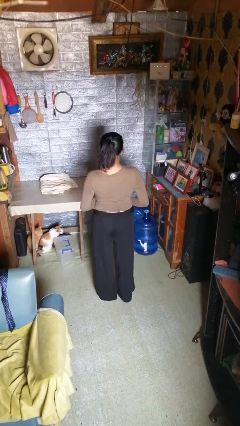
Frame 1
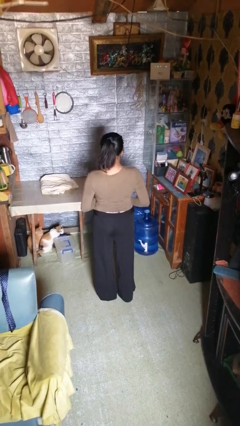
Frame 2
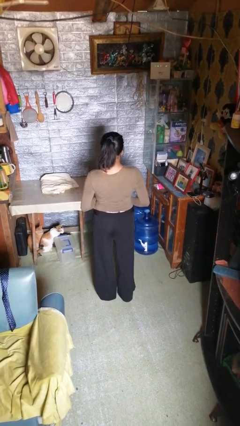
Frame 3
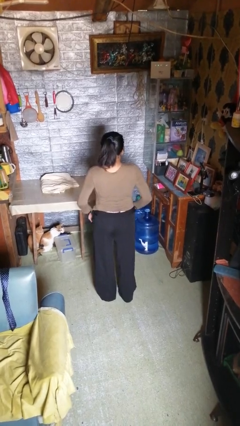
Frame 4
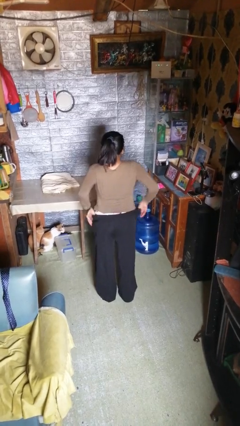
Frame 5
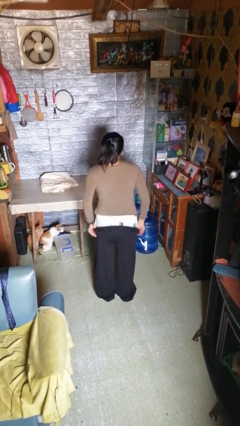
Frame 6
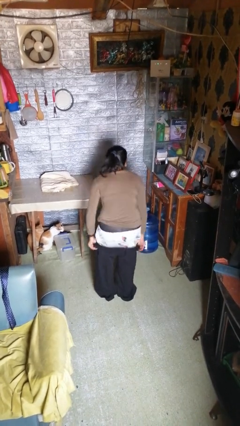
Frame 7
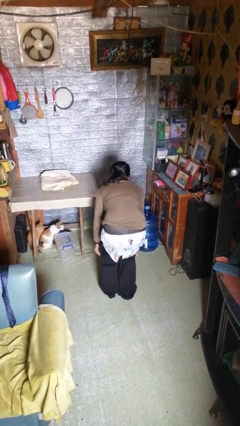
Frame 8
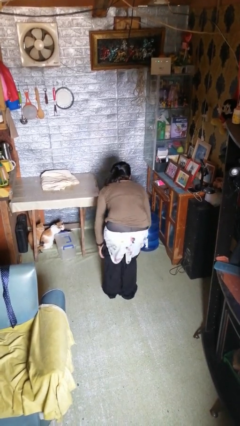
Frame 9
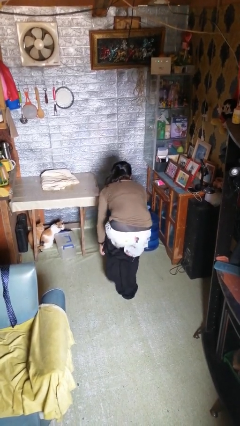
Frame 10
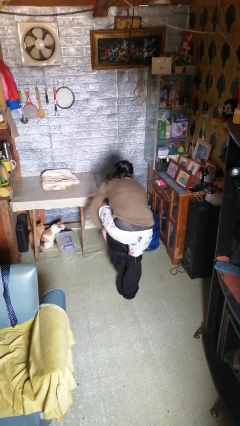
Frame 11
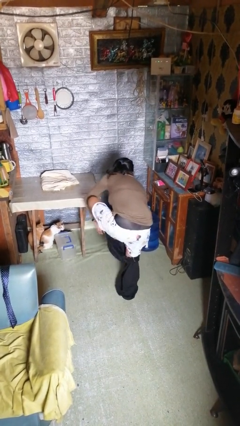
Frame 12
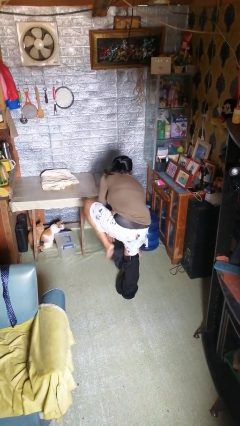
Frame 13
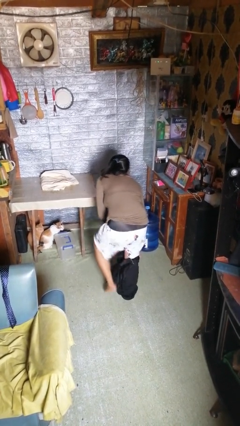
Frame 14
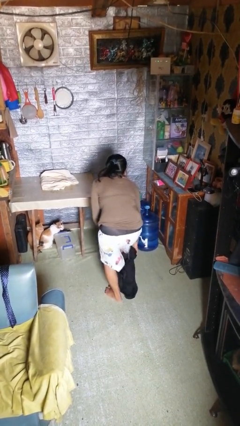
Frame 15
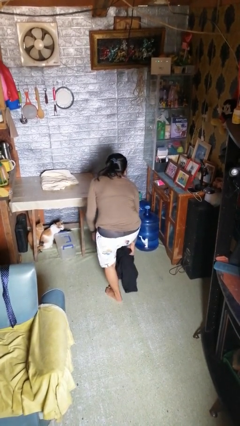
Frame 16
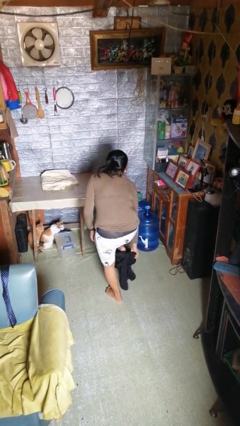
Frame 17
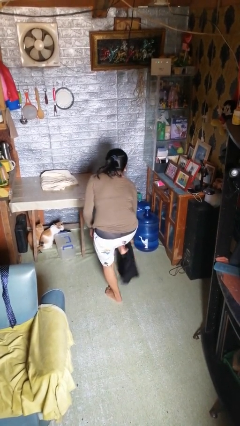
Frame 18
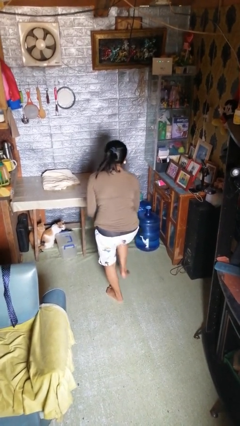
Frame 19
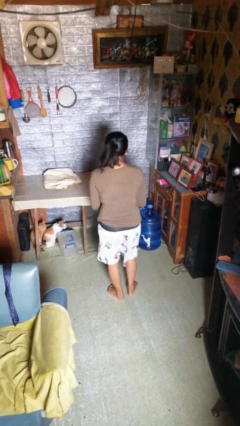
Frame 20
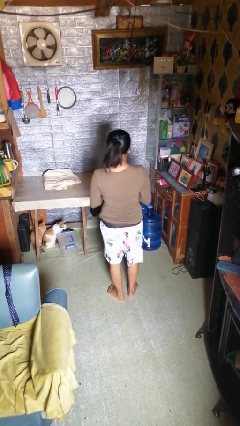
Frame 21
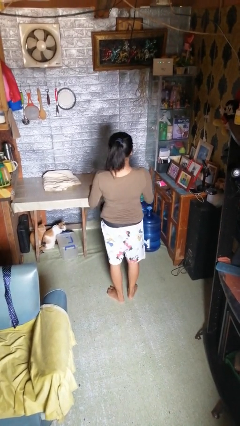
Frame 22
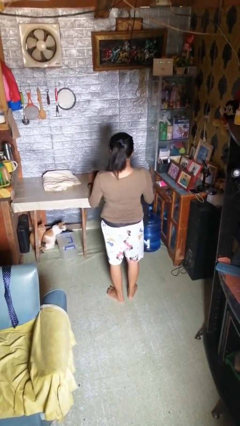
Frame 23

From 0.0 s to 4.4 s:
person takes off pants

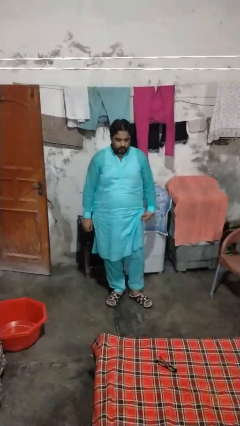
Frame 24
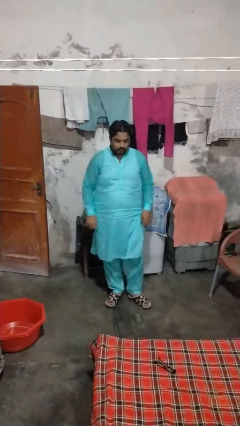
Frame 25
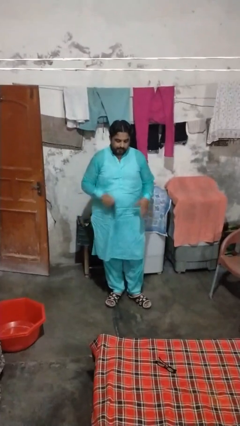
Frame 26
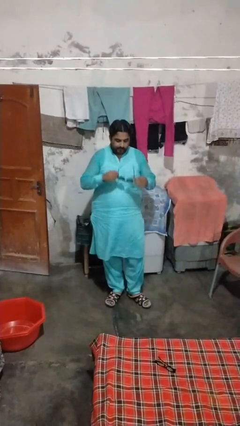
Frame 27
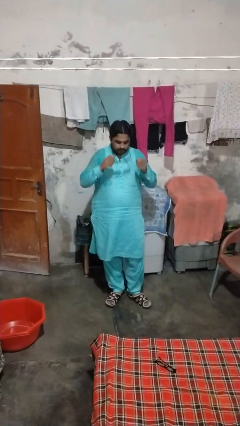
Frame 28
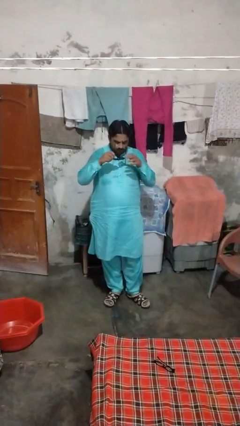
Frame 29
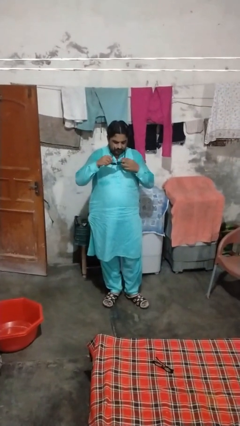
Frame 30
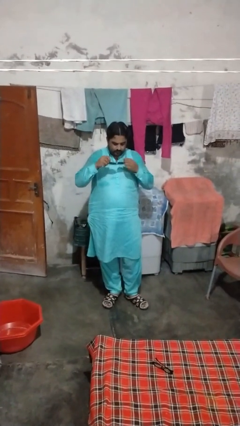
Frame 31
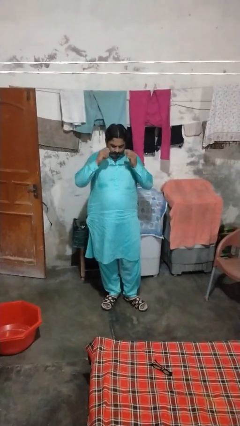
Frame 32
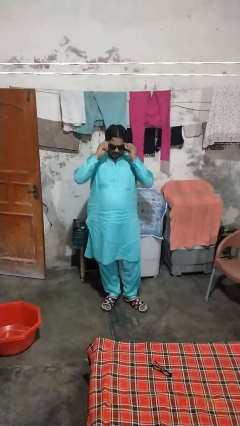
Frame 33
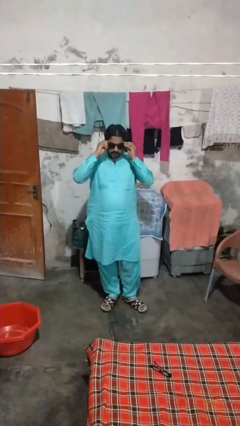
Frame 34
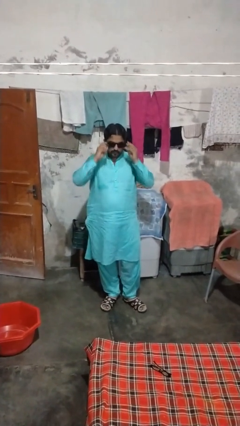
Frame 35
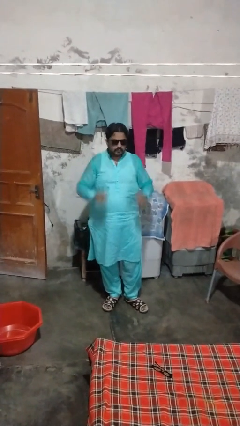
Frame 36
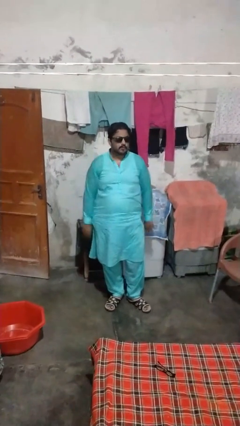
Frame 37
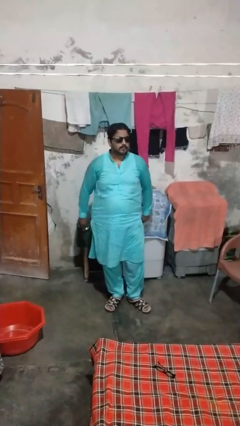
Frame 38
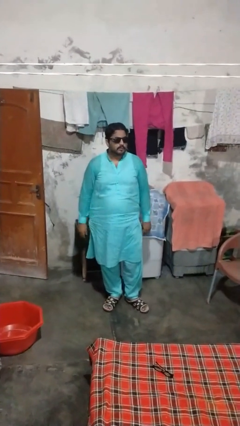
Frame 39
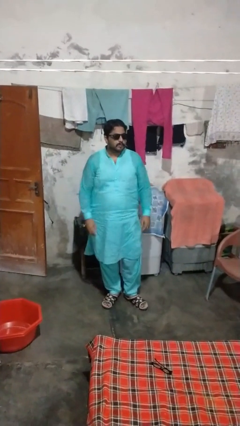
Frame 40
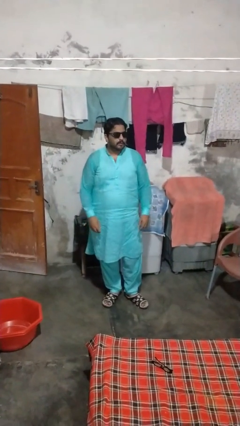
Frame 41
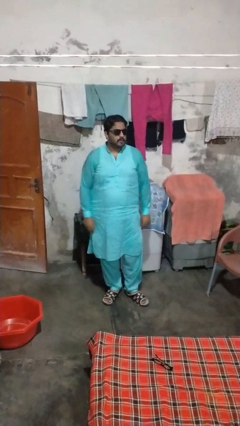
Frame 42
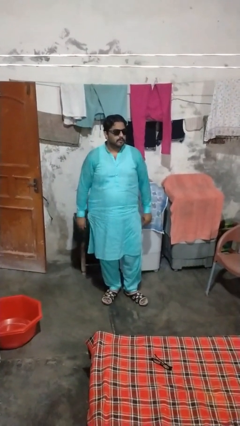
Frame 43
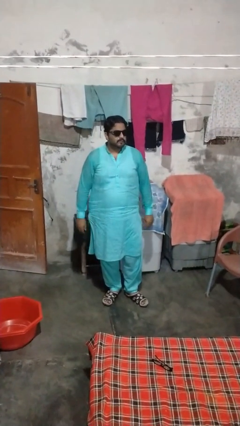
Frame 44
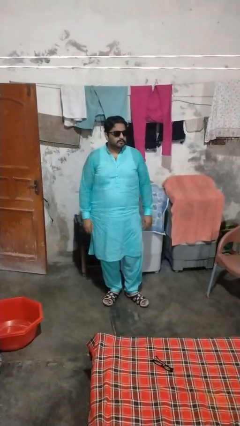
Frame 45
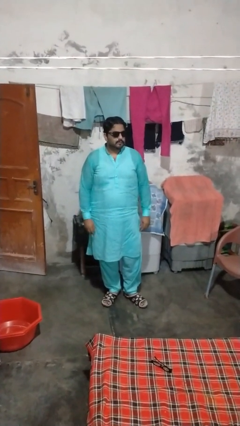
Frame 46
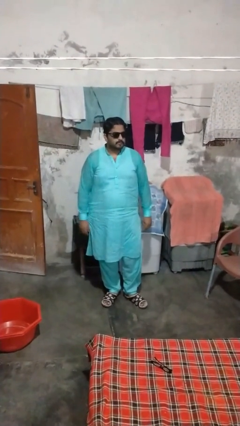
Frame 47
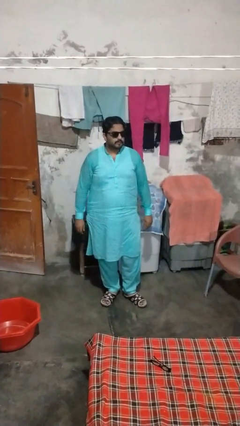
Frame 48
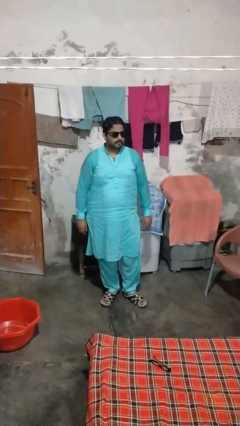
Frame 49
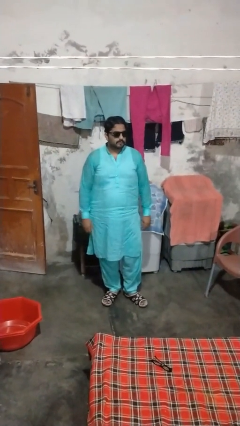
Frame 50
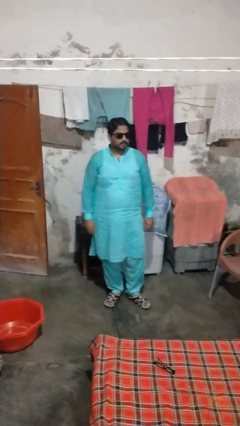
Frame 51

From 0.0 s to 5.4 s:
person puts on sunglasses

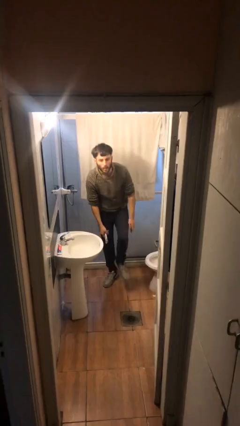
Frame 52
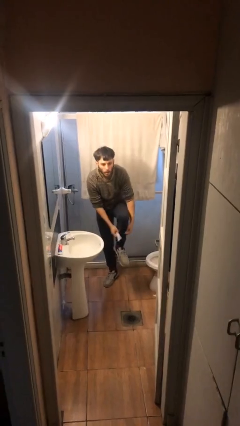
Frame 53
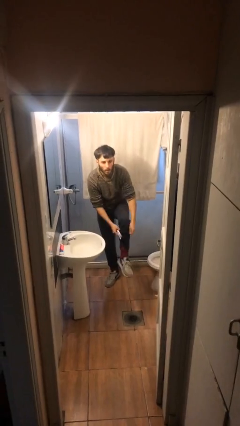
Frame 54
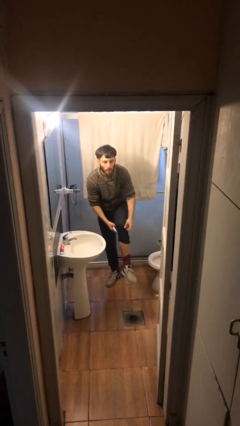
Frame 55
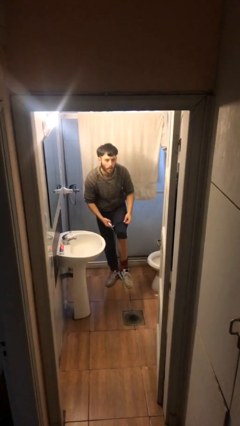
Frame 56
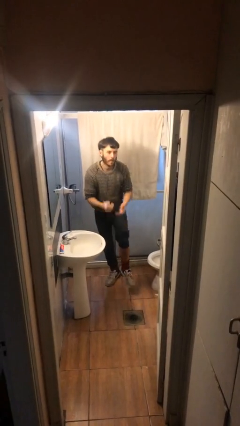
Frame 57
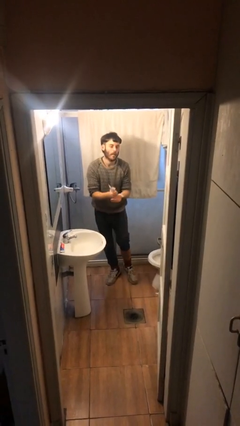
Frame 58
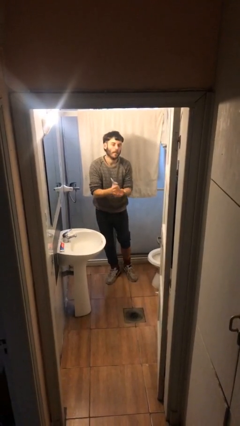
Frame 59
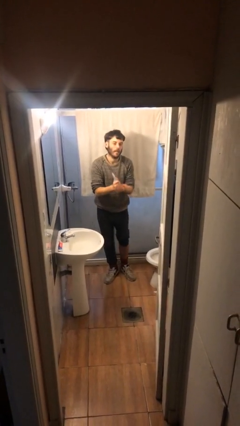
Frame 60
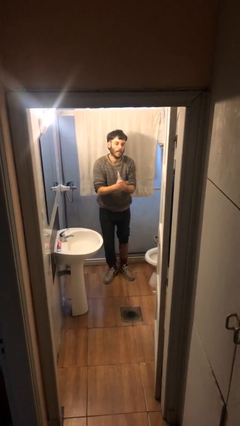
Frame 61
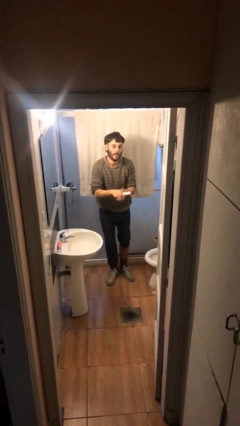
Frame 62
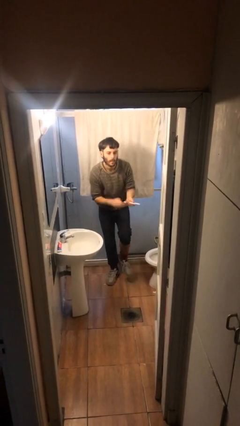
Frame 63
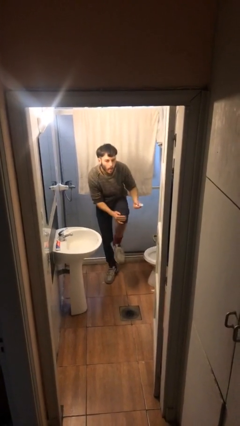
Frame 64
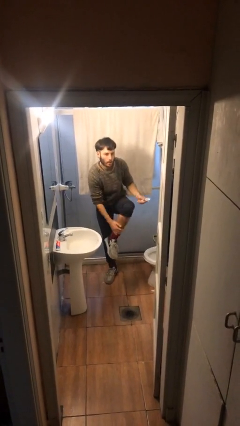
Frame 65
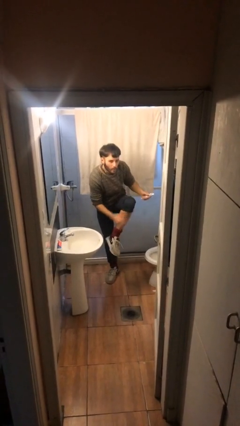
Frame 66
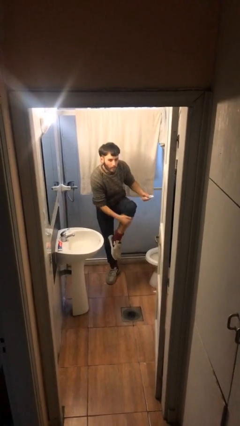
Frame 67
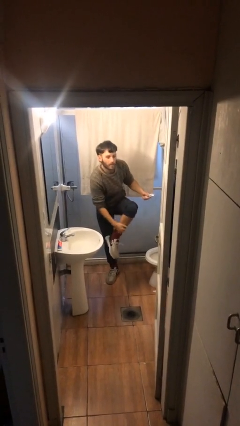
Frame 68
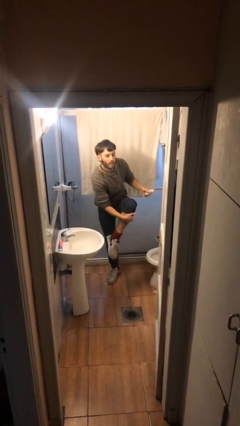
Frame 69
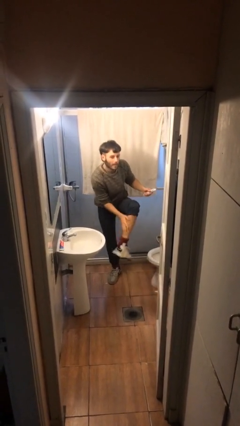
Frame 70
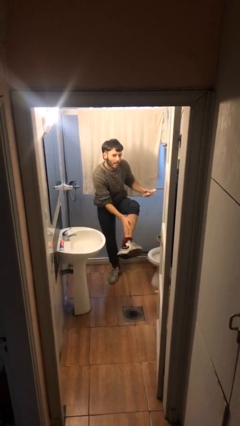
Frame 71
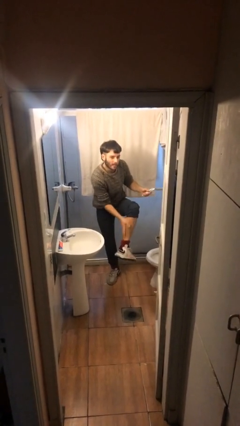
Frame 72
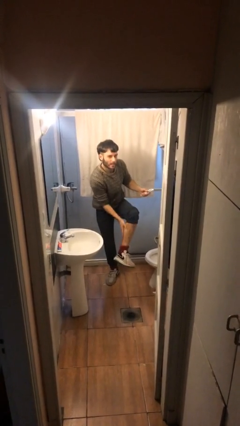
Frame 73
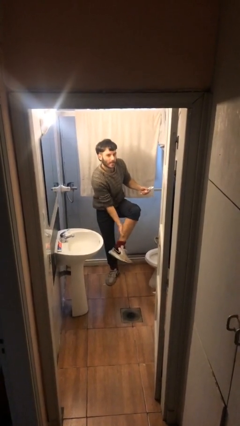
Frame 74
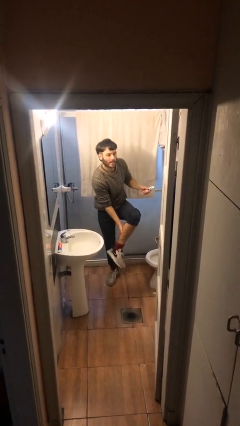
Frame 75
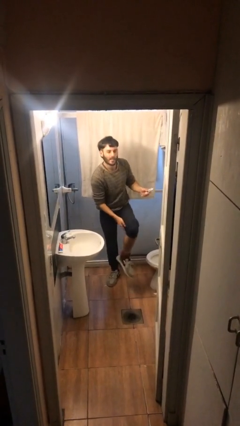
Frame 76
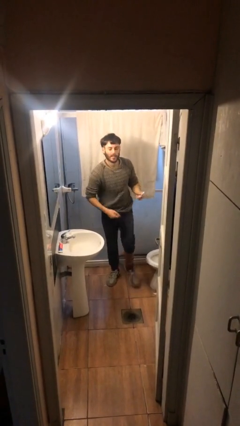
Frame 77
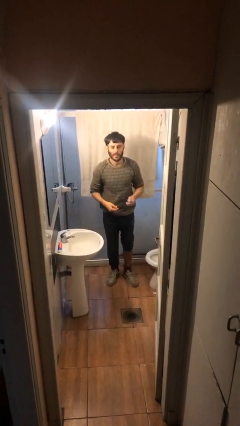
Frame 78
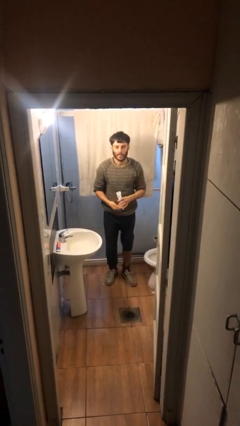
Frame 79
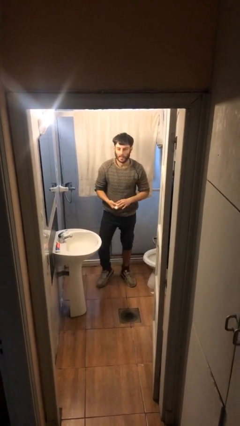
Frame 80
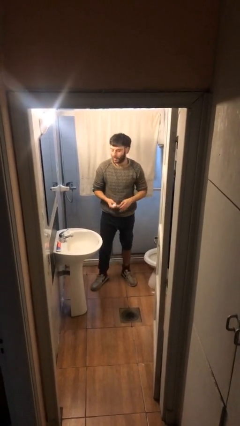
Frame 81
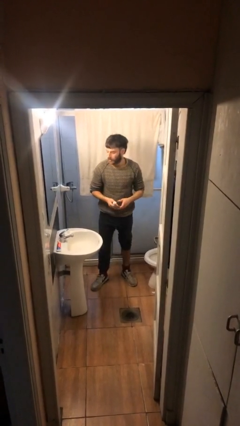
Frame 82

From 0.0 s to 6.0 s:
person applies sunscreen

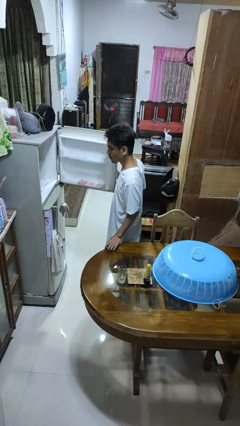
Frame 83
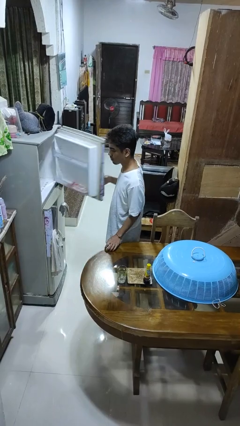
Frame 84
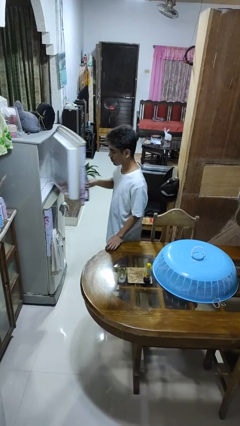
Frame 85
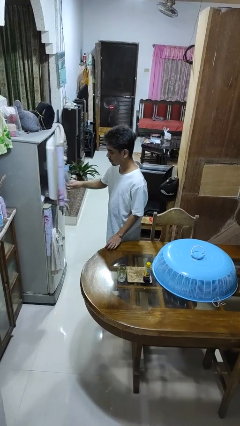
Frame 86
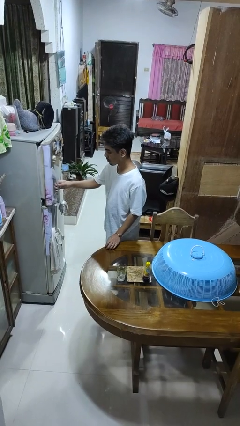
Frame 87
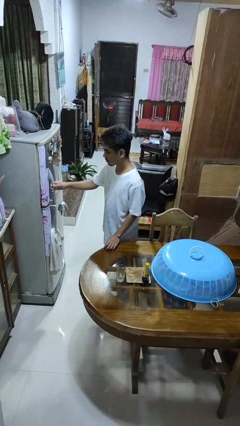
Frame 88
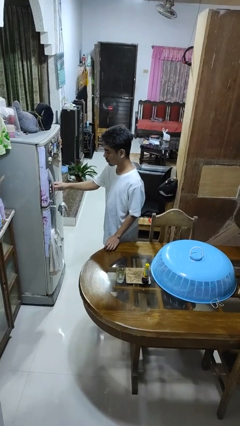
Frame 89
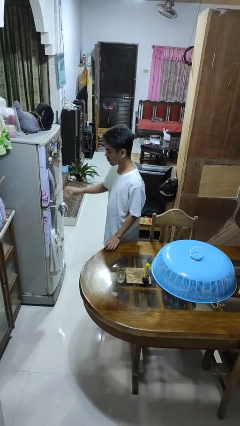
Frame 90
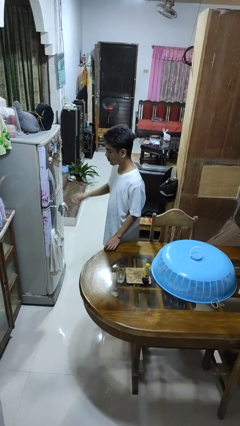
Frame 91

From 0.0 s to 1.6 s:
person closes refrigerator
